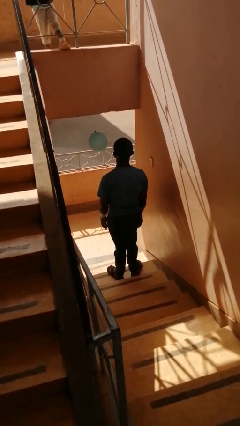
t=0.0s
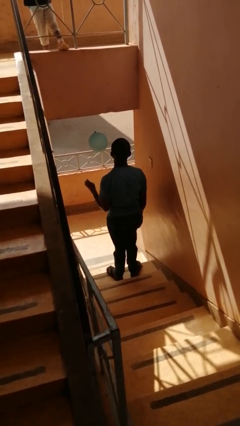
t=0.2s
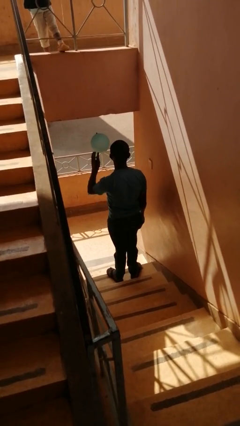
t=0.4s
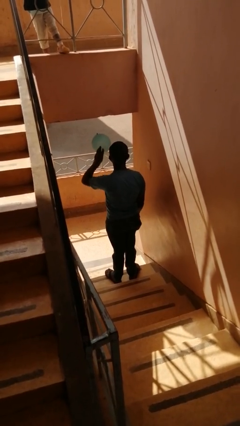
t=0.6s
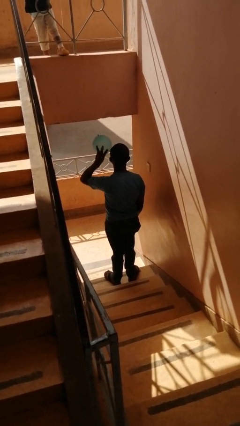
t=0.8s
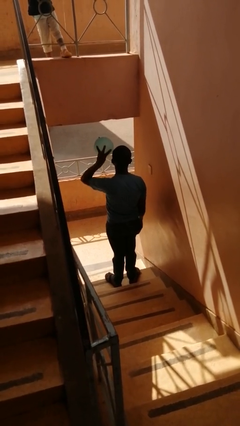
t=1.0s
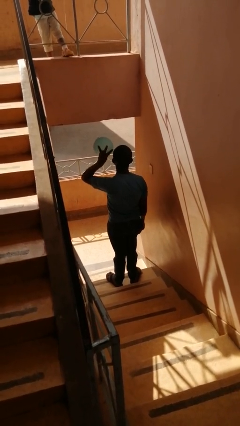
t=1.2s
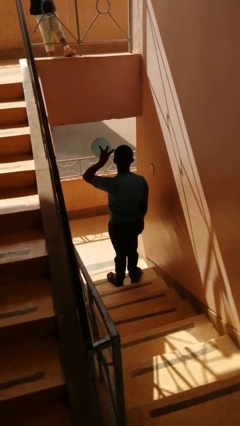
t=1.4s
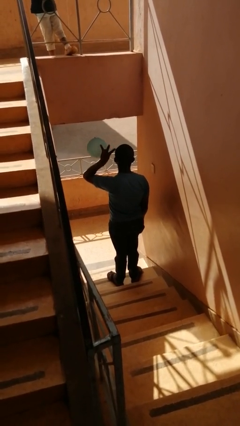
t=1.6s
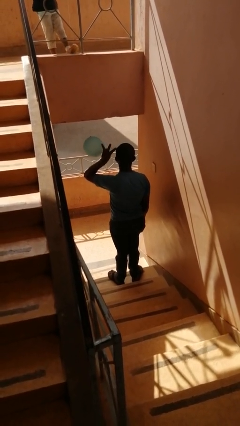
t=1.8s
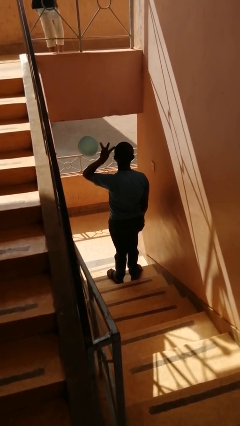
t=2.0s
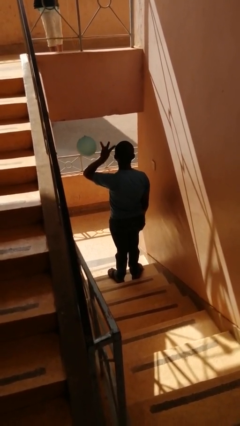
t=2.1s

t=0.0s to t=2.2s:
person gestures number three

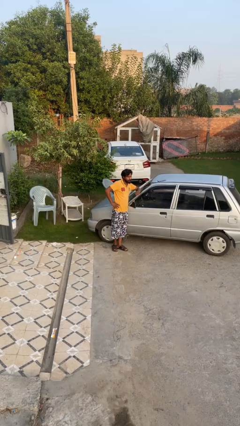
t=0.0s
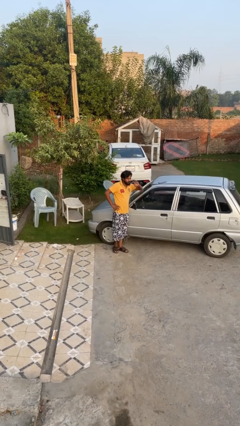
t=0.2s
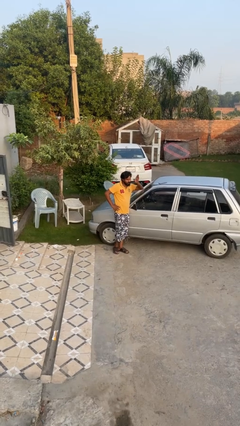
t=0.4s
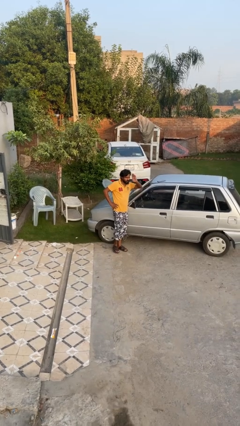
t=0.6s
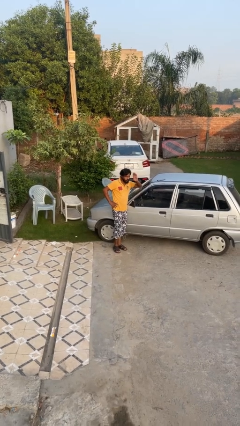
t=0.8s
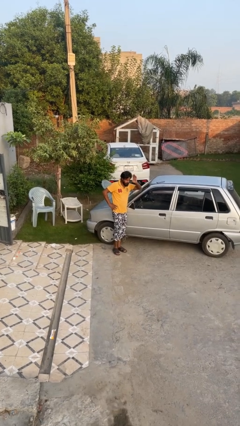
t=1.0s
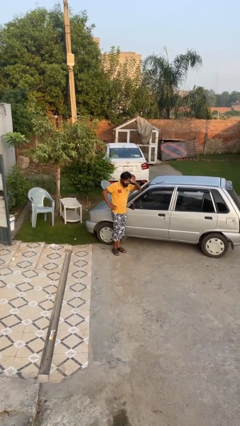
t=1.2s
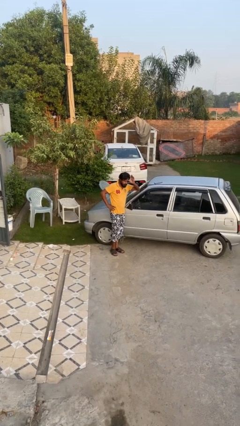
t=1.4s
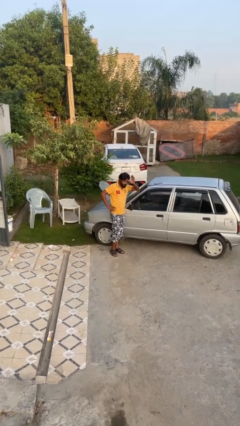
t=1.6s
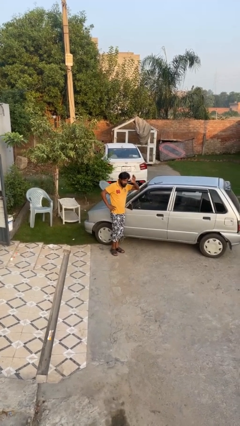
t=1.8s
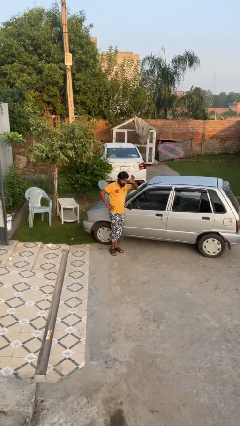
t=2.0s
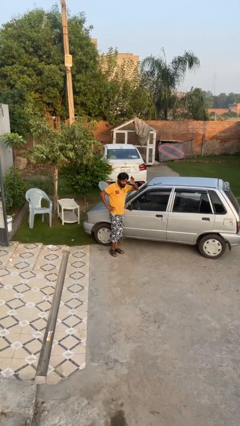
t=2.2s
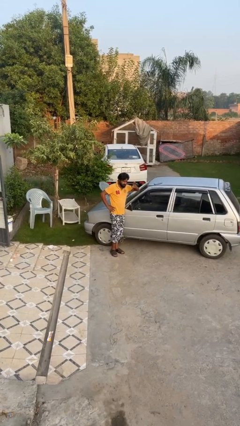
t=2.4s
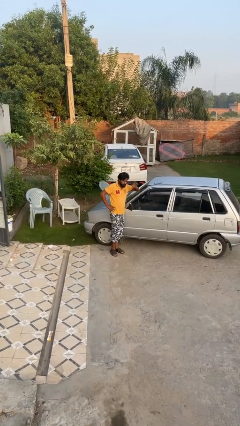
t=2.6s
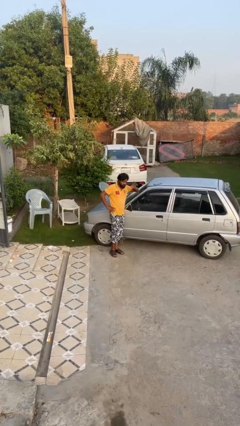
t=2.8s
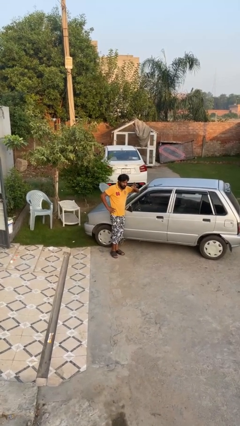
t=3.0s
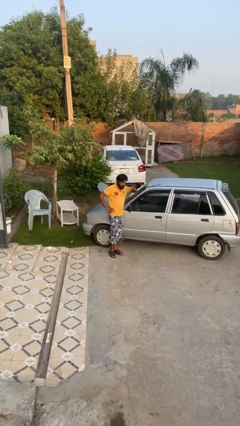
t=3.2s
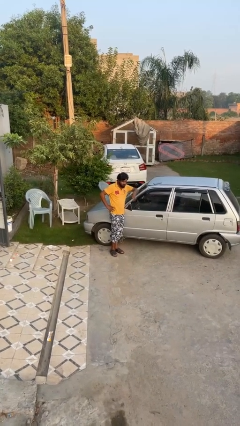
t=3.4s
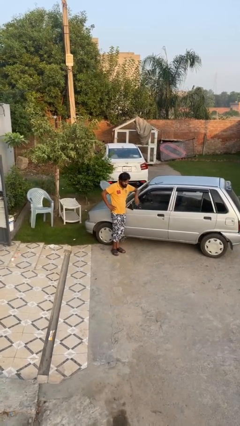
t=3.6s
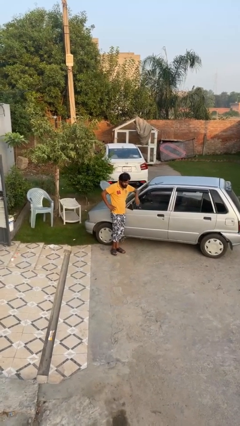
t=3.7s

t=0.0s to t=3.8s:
person waves at person

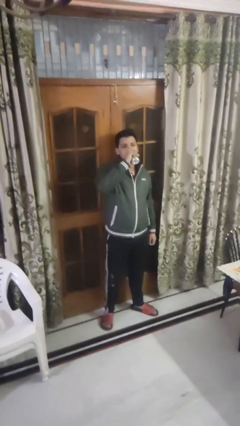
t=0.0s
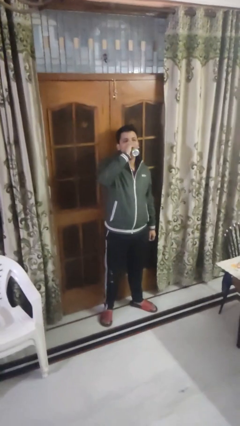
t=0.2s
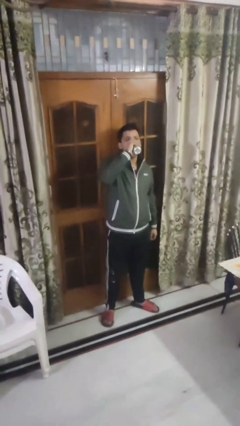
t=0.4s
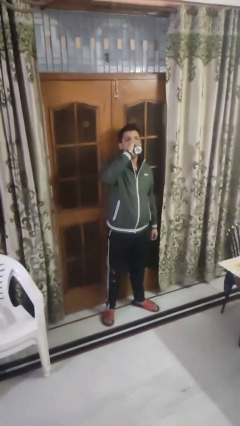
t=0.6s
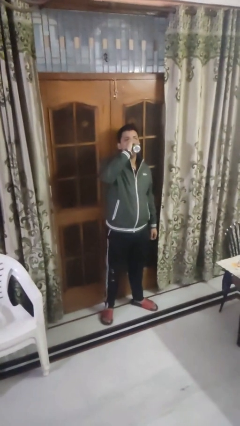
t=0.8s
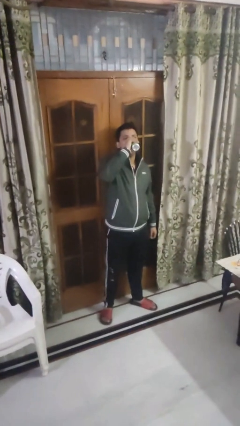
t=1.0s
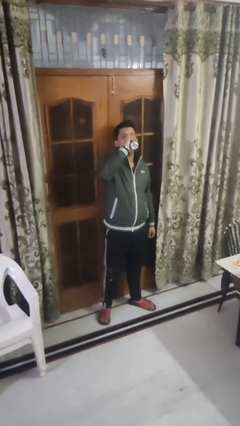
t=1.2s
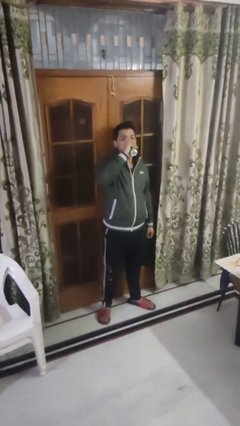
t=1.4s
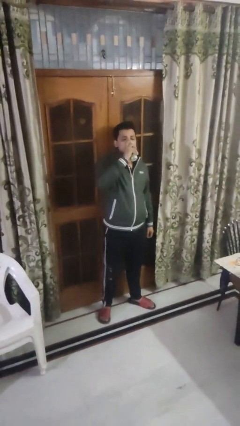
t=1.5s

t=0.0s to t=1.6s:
person drinks from beverage can

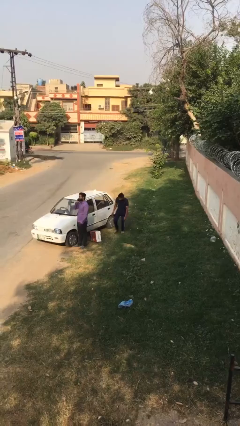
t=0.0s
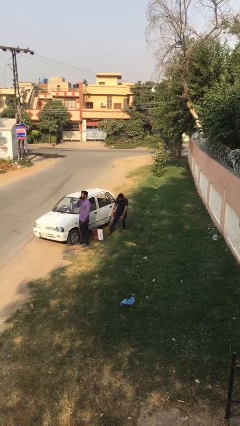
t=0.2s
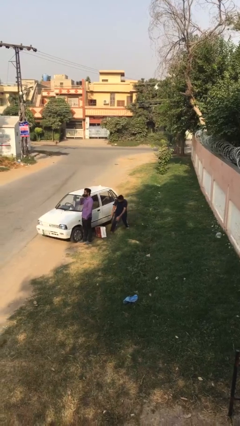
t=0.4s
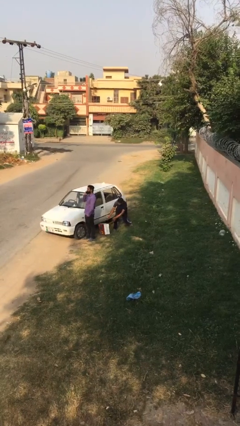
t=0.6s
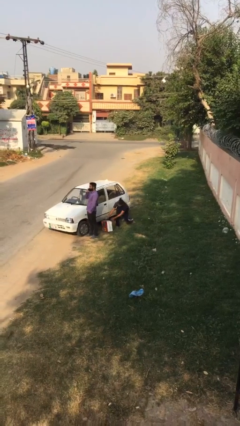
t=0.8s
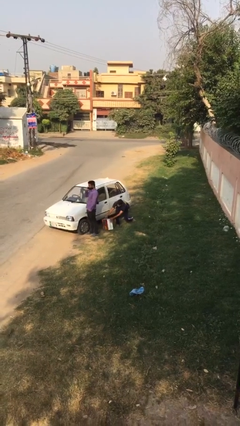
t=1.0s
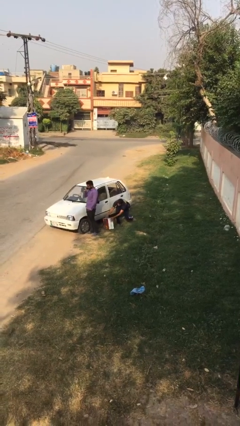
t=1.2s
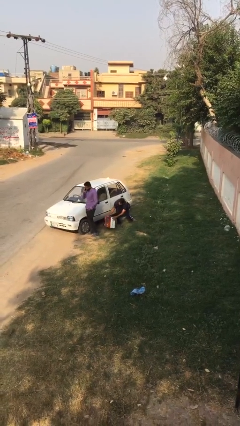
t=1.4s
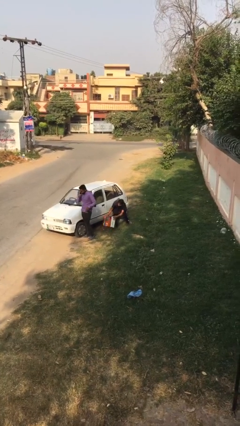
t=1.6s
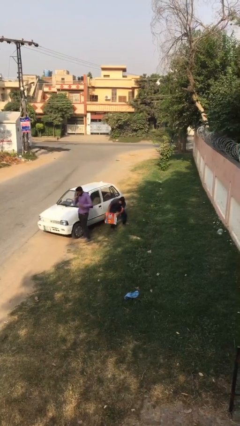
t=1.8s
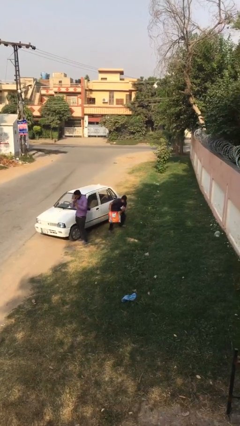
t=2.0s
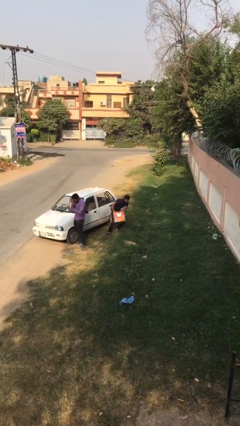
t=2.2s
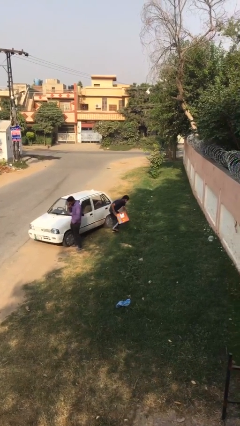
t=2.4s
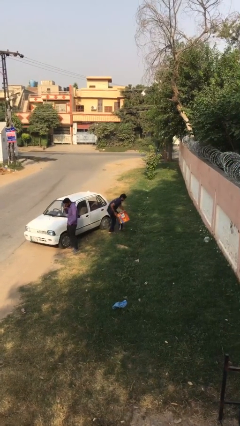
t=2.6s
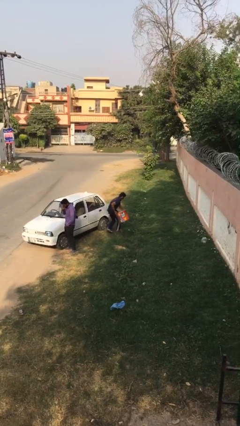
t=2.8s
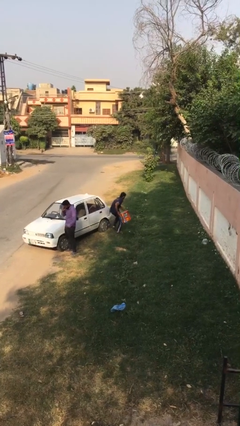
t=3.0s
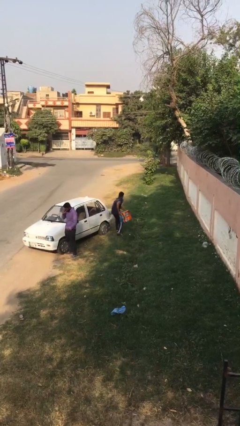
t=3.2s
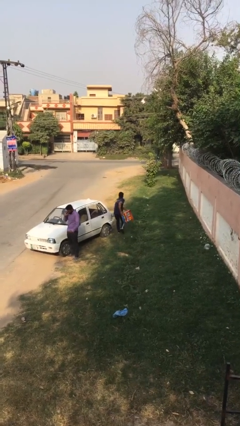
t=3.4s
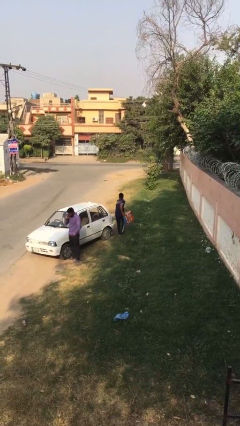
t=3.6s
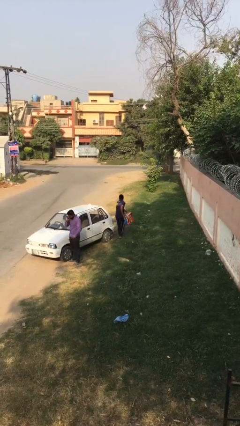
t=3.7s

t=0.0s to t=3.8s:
person steals object from person

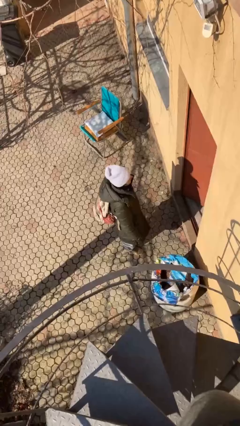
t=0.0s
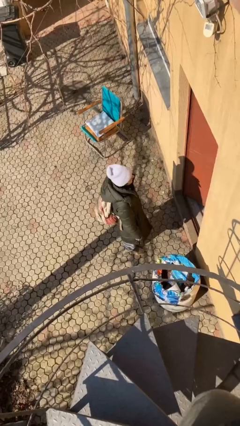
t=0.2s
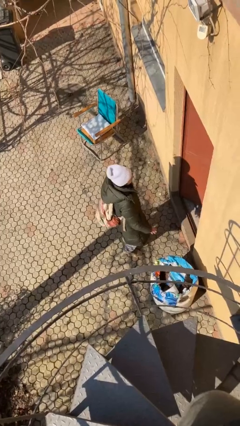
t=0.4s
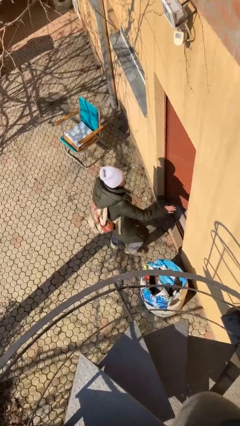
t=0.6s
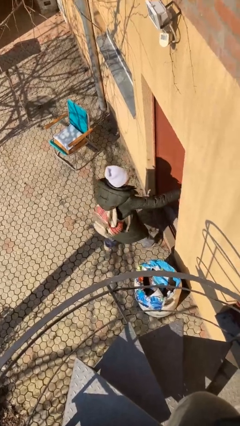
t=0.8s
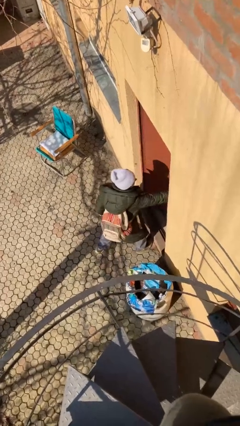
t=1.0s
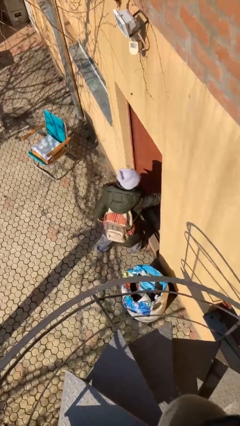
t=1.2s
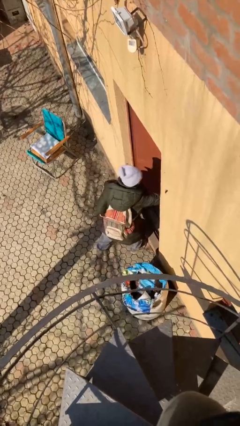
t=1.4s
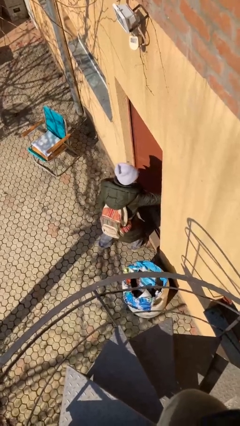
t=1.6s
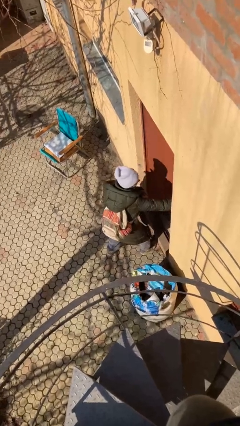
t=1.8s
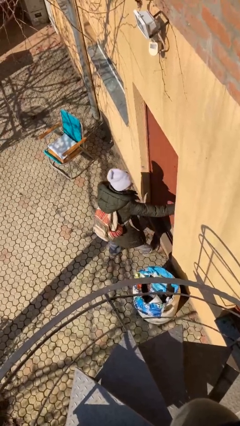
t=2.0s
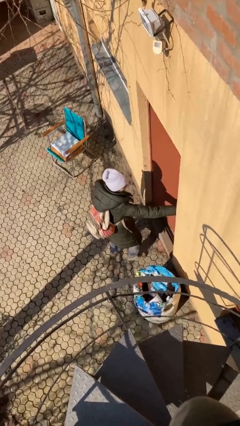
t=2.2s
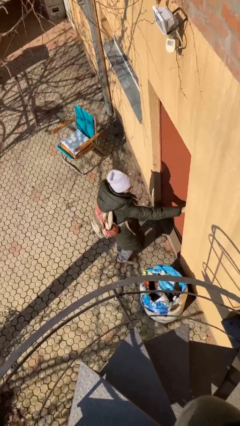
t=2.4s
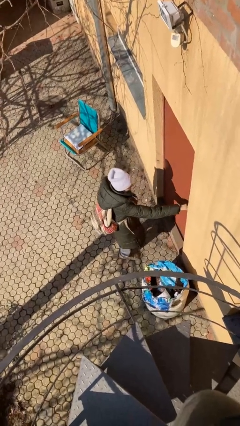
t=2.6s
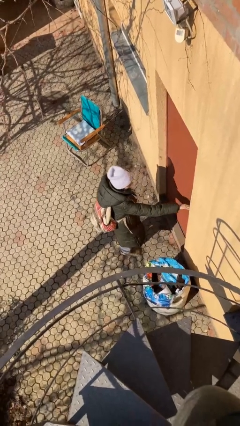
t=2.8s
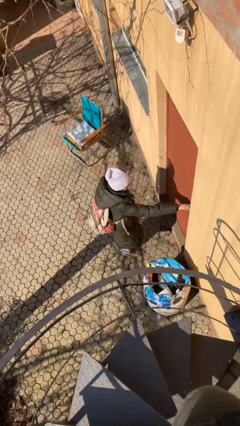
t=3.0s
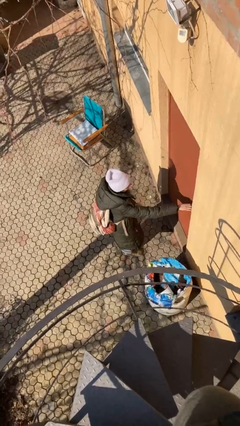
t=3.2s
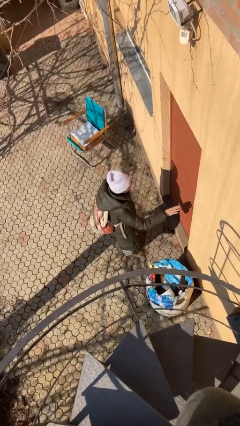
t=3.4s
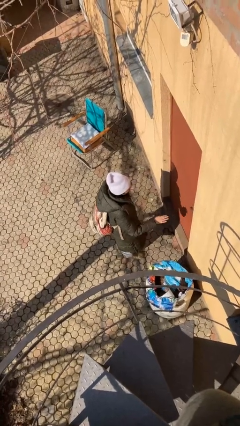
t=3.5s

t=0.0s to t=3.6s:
person closes facility door

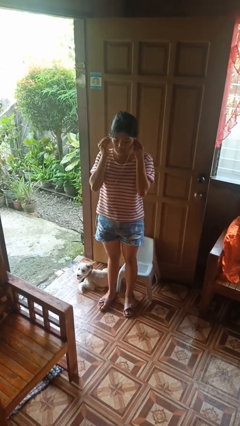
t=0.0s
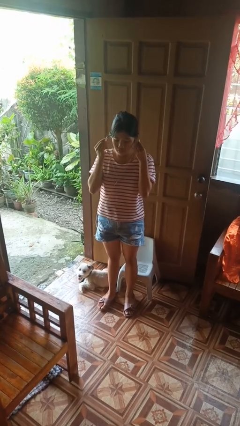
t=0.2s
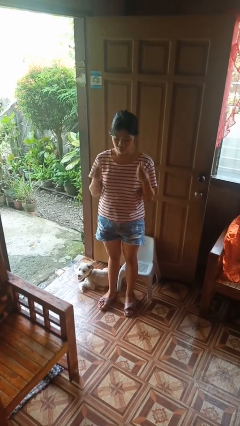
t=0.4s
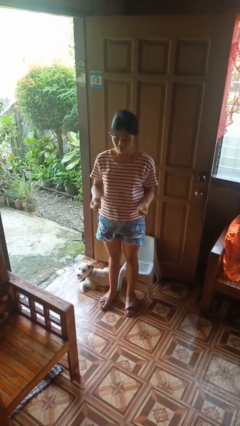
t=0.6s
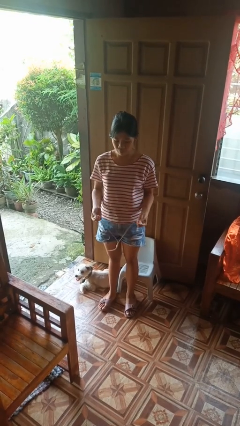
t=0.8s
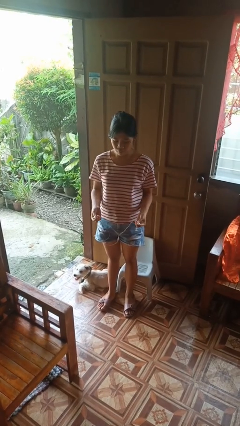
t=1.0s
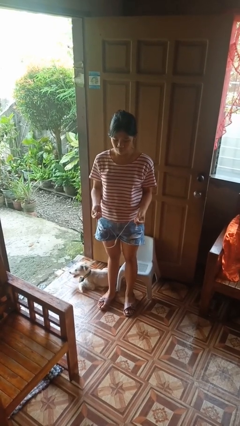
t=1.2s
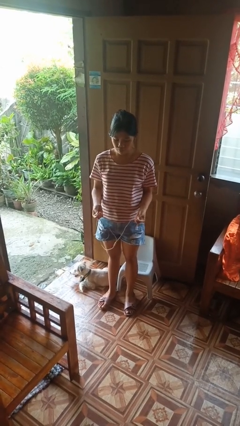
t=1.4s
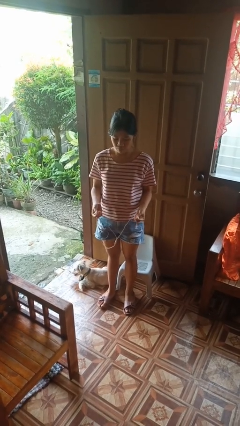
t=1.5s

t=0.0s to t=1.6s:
person takes off headphones

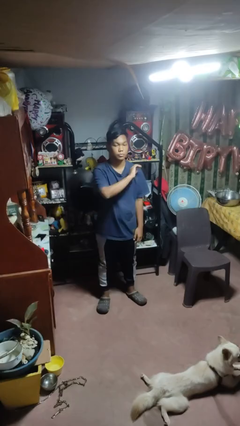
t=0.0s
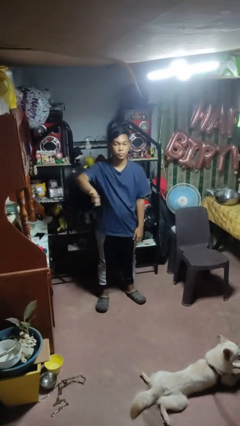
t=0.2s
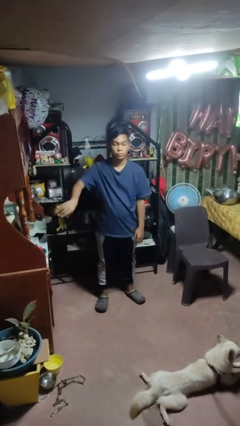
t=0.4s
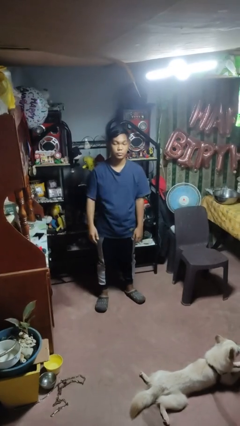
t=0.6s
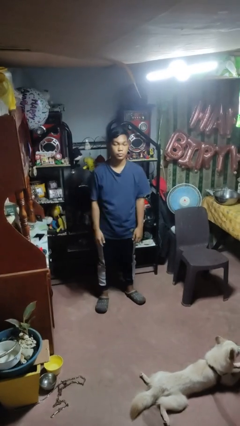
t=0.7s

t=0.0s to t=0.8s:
person gestures swipe right
